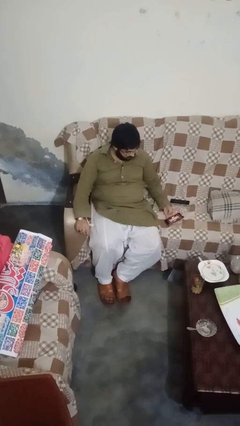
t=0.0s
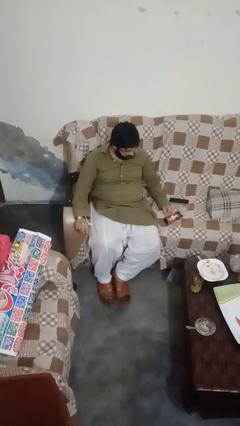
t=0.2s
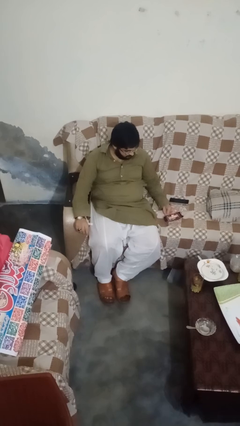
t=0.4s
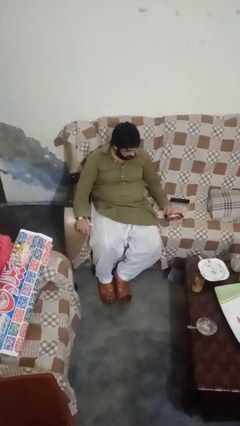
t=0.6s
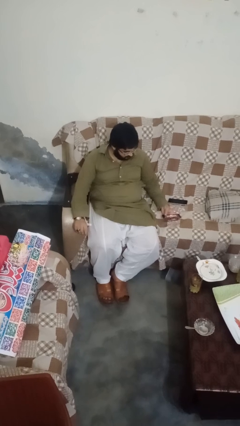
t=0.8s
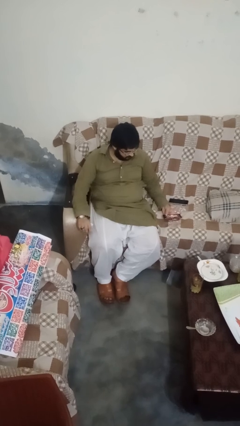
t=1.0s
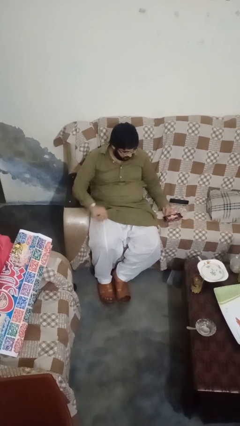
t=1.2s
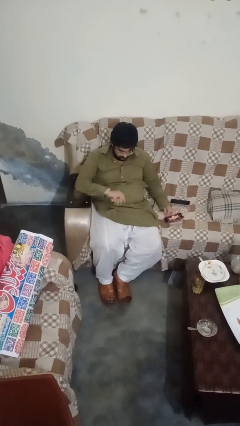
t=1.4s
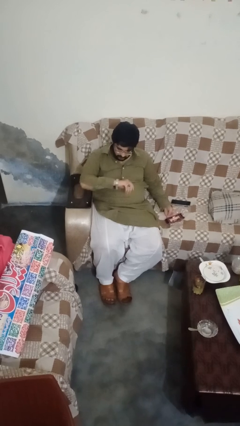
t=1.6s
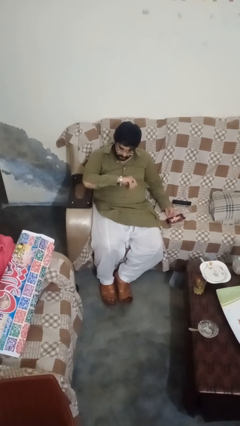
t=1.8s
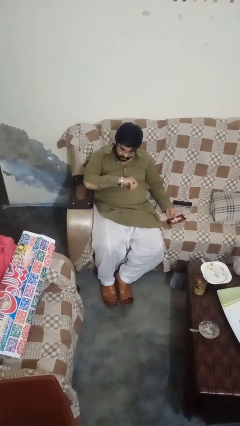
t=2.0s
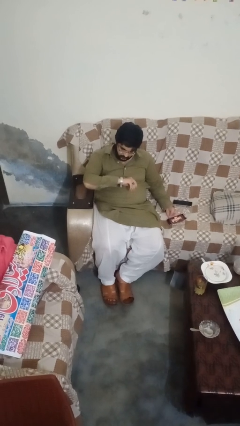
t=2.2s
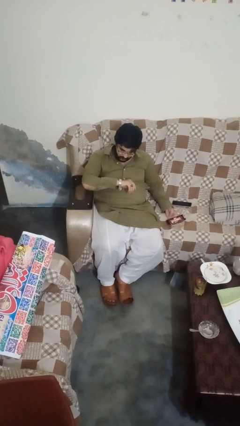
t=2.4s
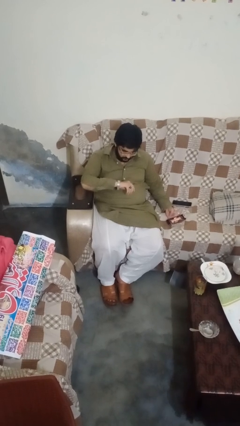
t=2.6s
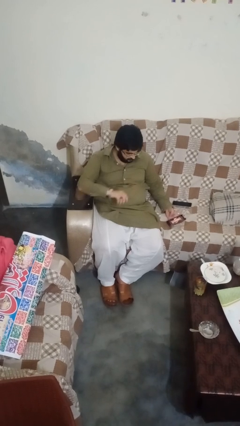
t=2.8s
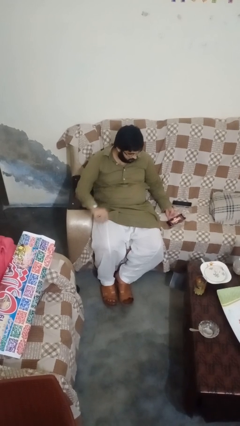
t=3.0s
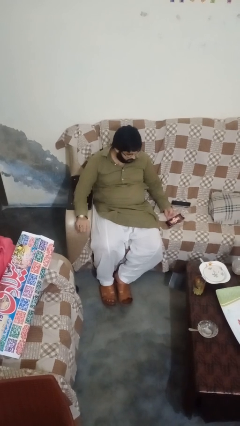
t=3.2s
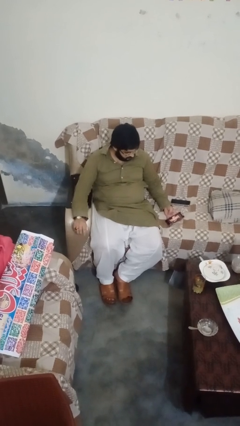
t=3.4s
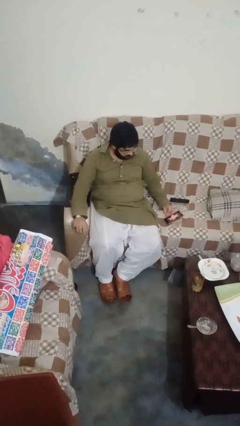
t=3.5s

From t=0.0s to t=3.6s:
person looks at wristwatch

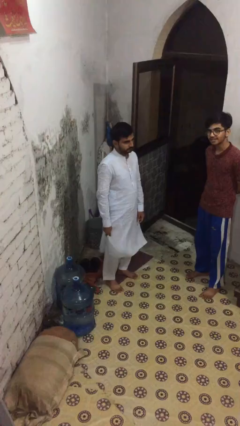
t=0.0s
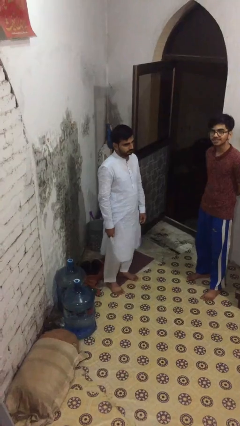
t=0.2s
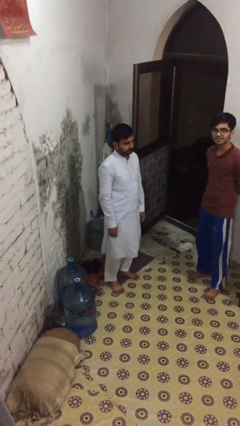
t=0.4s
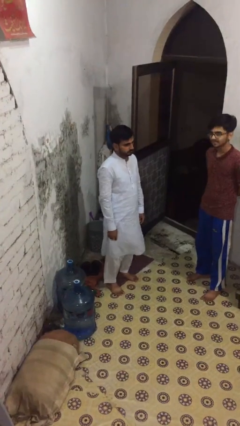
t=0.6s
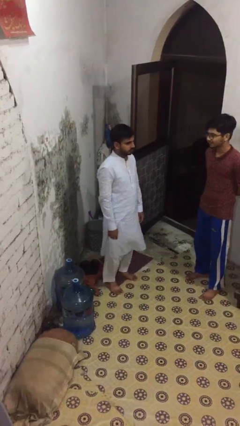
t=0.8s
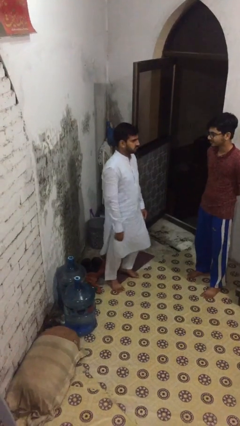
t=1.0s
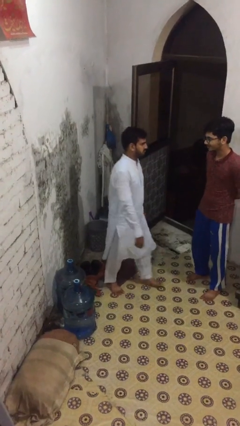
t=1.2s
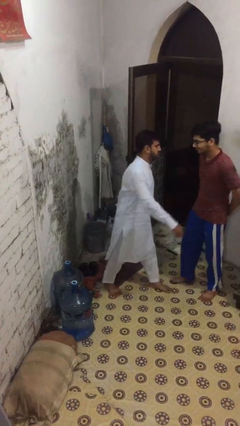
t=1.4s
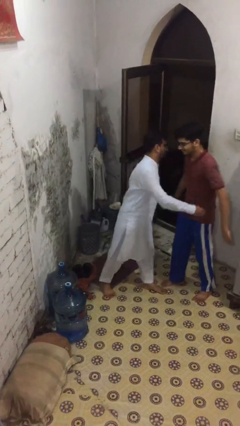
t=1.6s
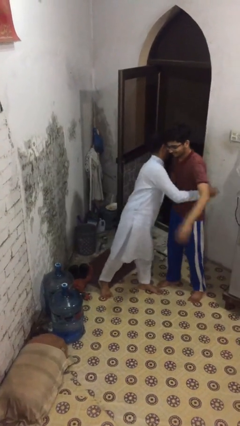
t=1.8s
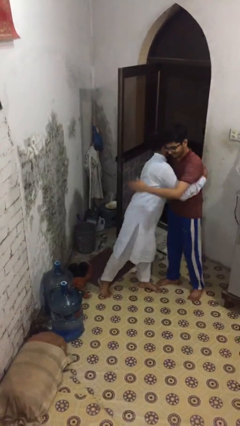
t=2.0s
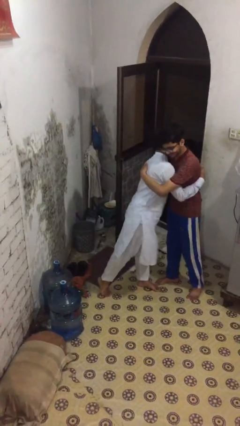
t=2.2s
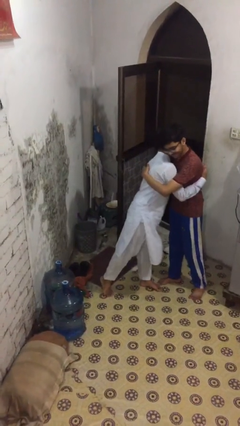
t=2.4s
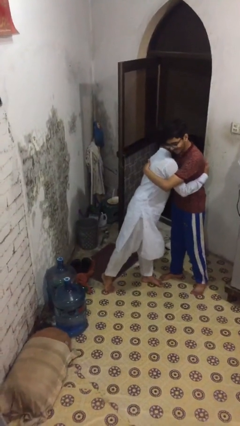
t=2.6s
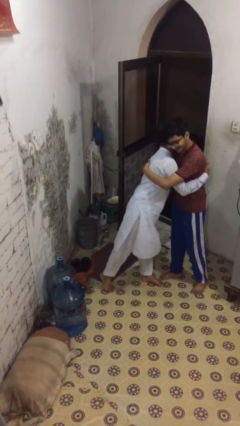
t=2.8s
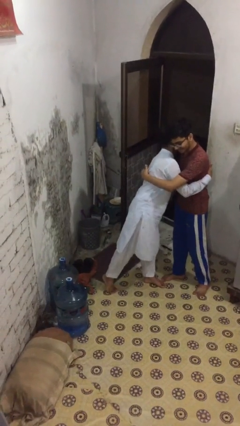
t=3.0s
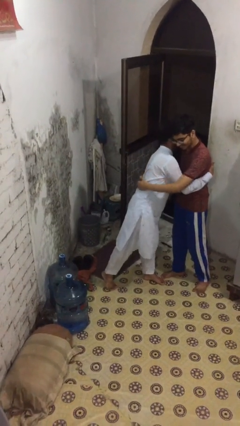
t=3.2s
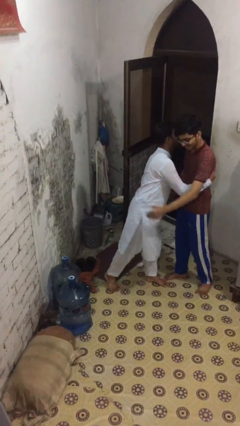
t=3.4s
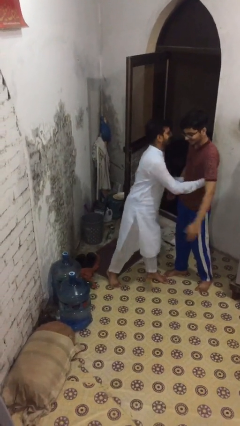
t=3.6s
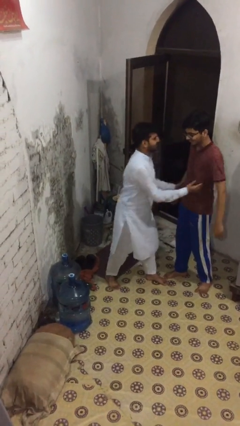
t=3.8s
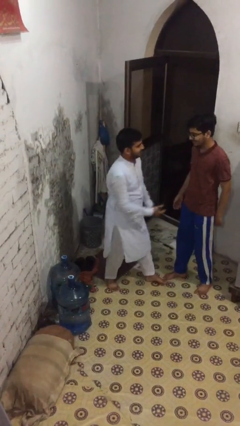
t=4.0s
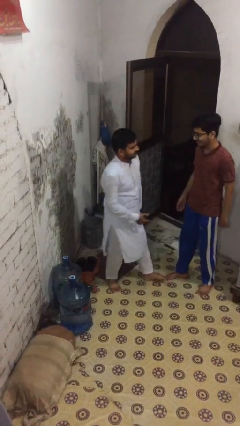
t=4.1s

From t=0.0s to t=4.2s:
person embraces person

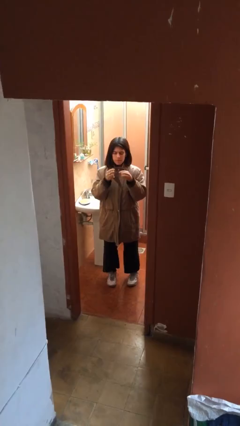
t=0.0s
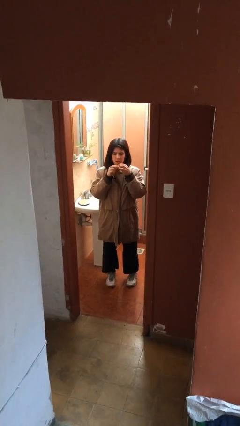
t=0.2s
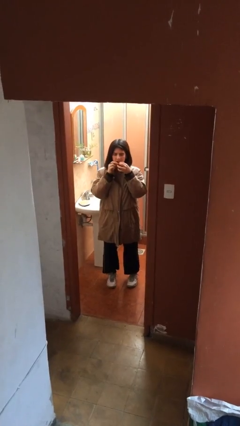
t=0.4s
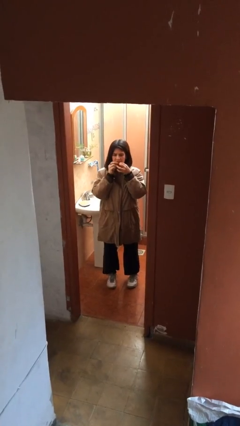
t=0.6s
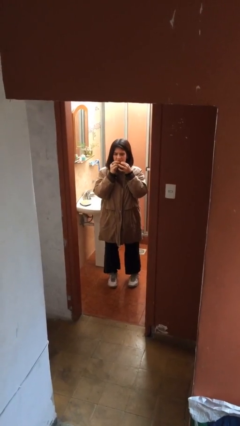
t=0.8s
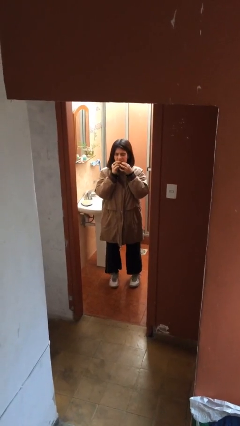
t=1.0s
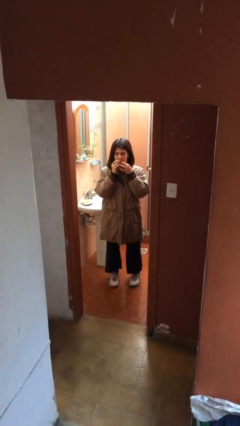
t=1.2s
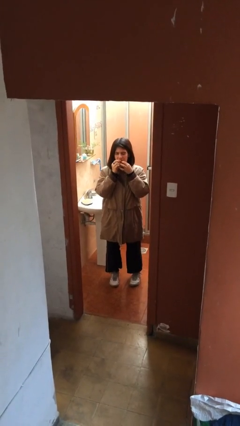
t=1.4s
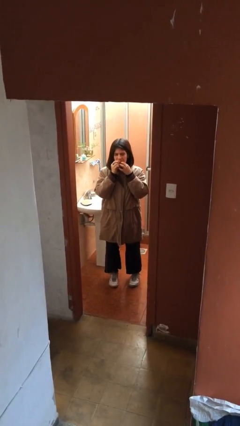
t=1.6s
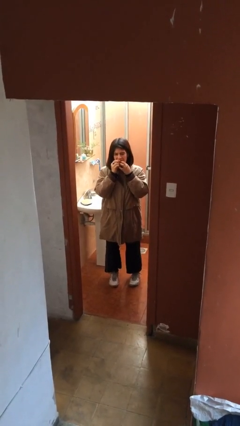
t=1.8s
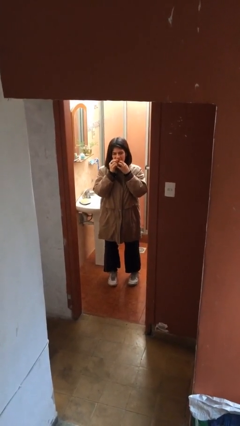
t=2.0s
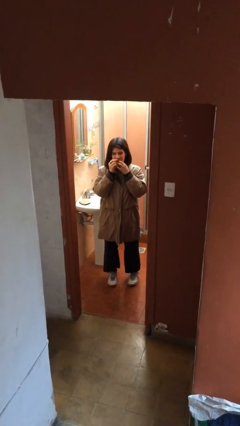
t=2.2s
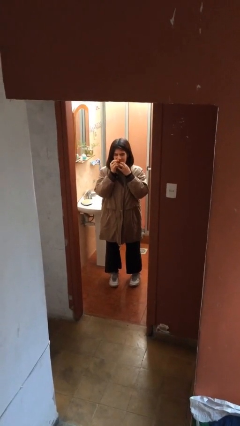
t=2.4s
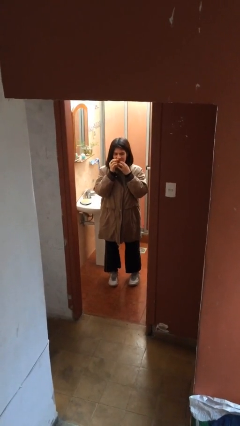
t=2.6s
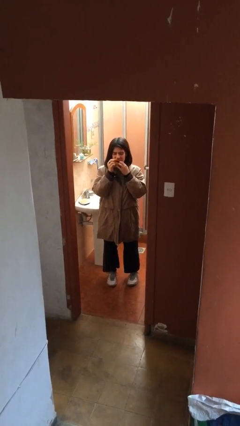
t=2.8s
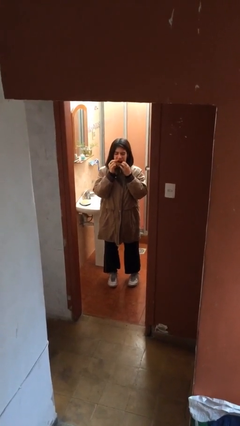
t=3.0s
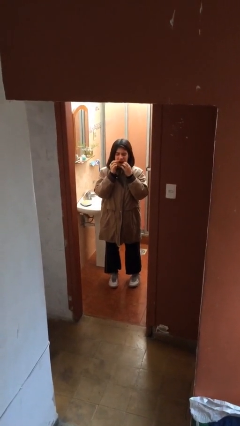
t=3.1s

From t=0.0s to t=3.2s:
person flosses

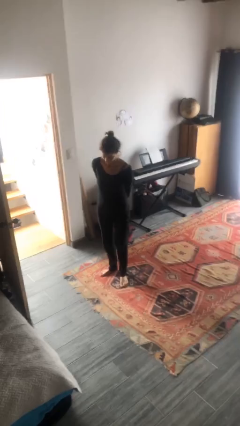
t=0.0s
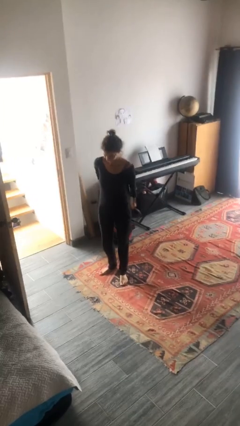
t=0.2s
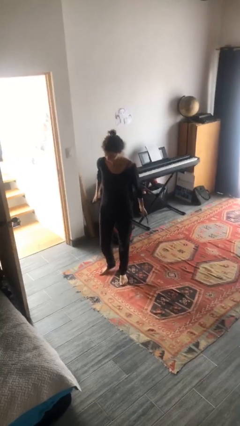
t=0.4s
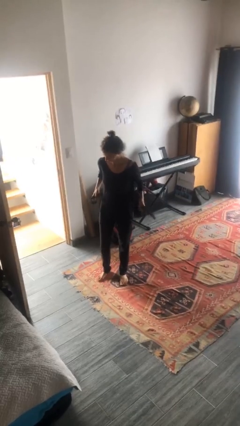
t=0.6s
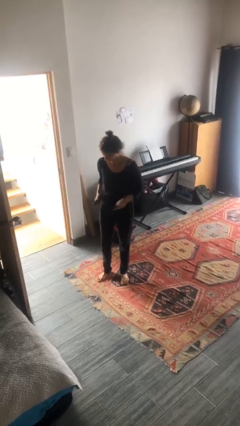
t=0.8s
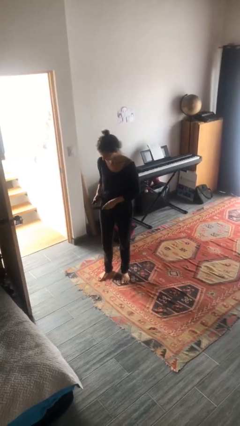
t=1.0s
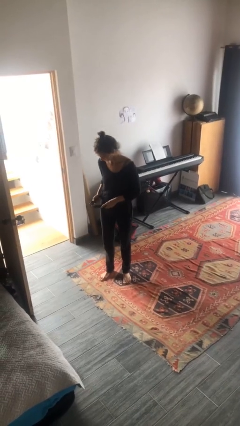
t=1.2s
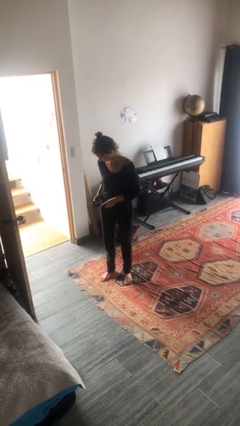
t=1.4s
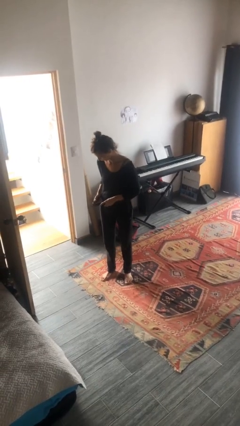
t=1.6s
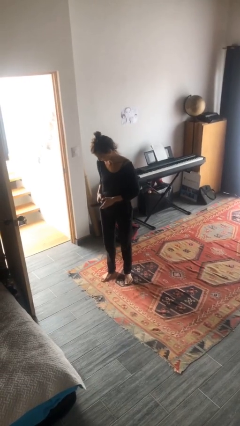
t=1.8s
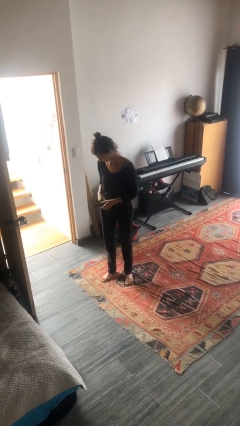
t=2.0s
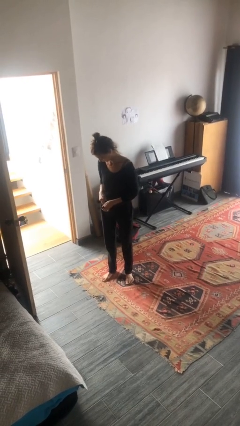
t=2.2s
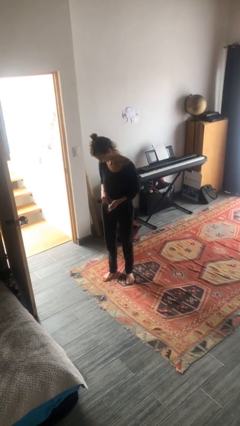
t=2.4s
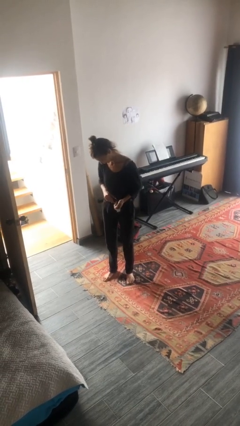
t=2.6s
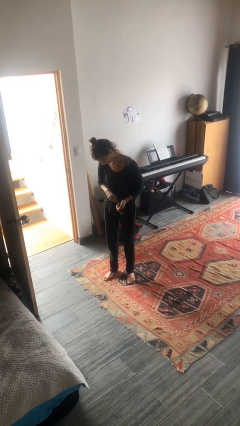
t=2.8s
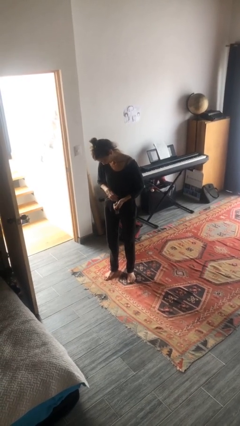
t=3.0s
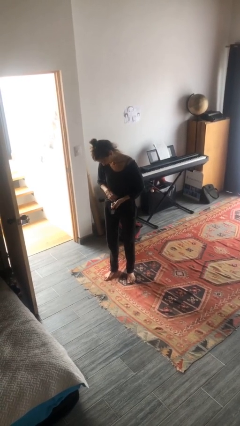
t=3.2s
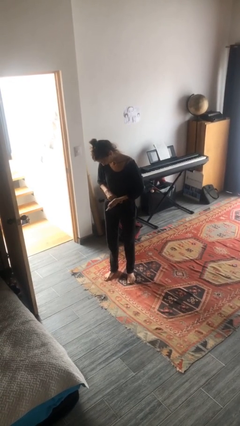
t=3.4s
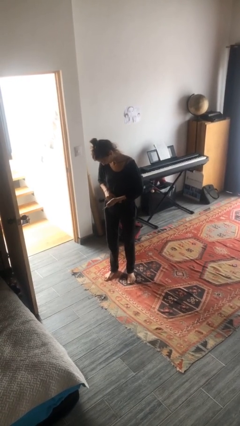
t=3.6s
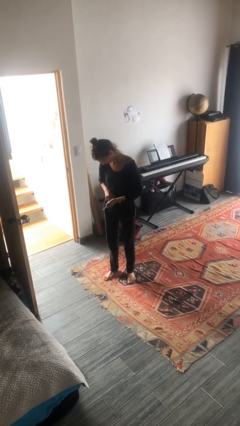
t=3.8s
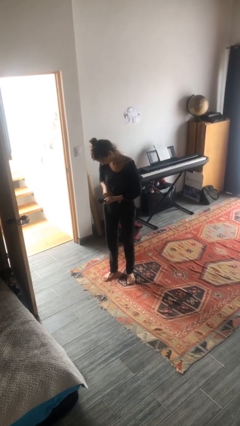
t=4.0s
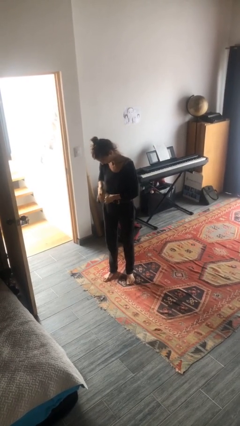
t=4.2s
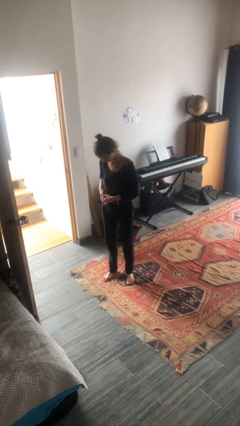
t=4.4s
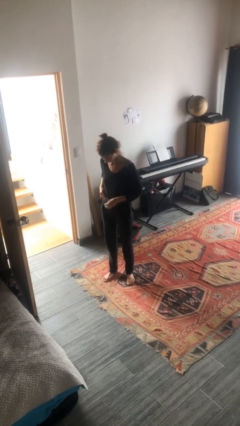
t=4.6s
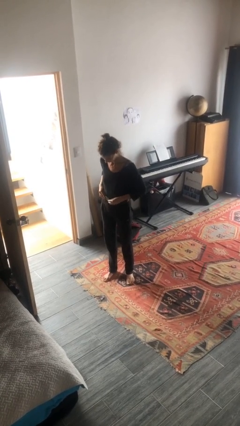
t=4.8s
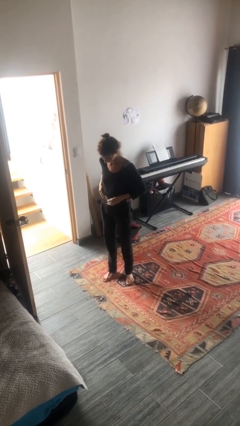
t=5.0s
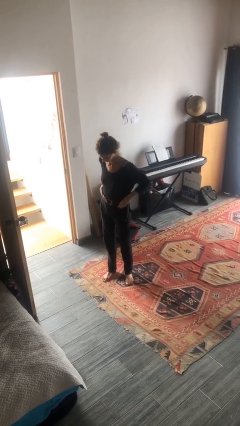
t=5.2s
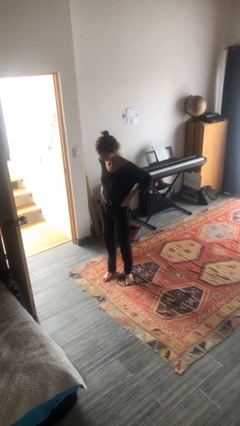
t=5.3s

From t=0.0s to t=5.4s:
person puts on belt

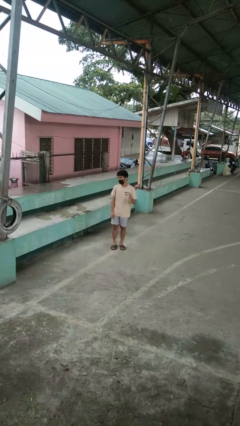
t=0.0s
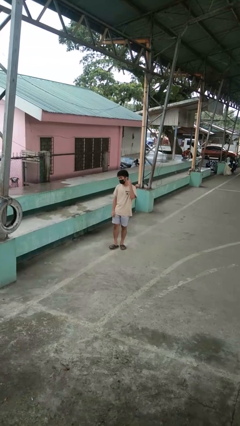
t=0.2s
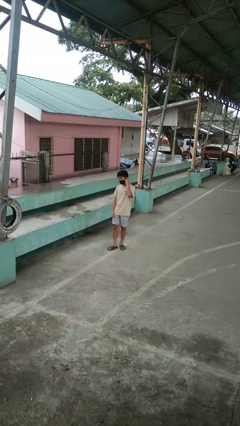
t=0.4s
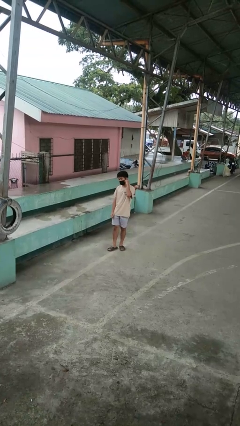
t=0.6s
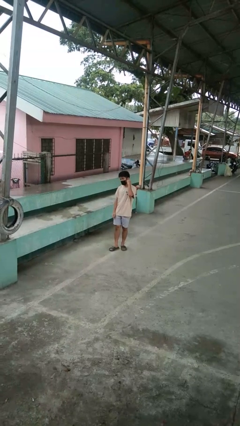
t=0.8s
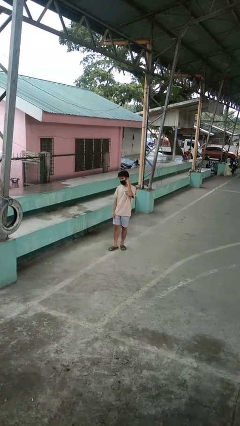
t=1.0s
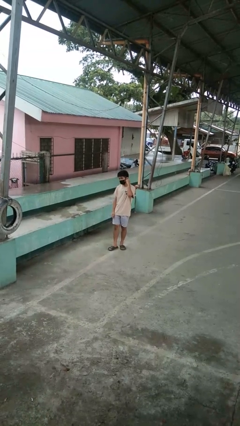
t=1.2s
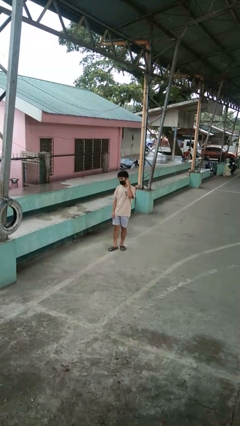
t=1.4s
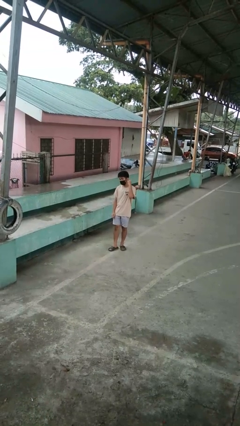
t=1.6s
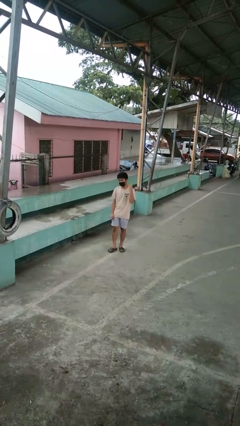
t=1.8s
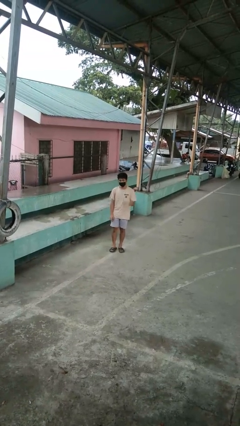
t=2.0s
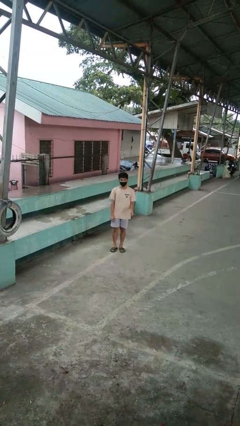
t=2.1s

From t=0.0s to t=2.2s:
person gestures listen closely
